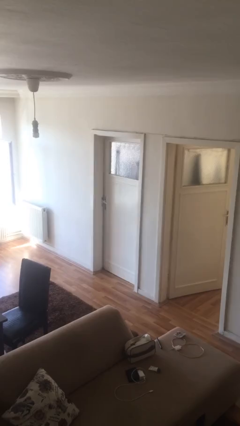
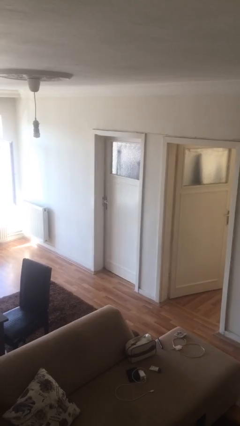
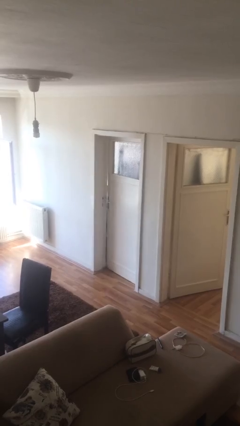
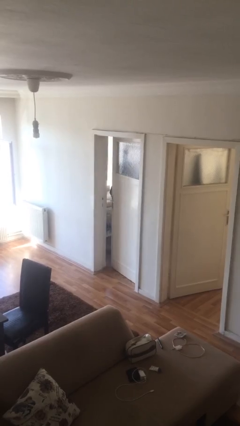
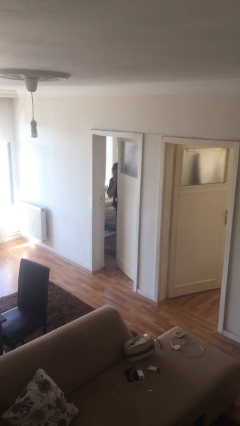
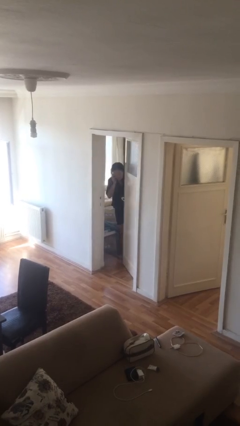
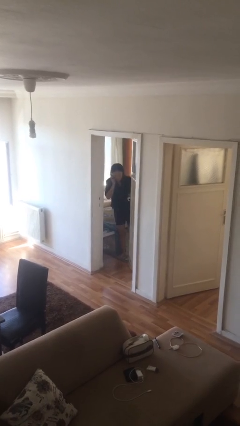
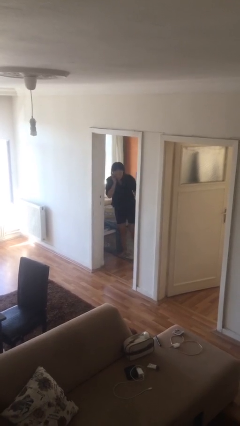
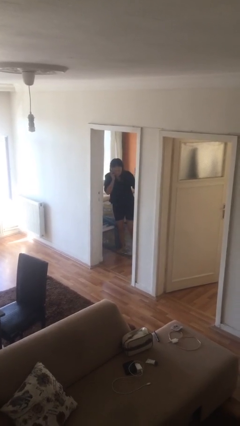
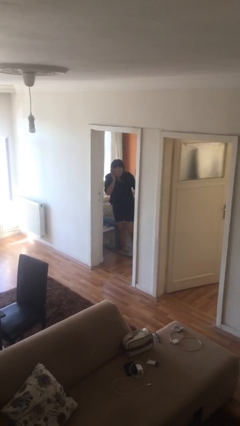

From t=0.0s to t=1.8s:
person opens facility door

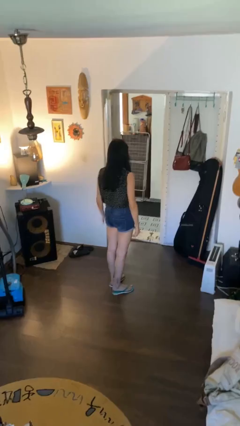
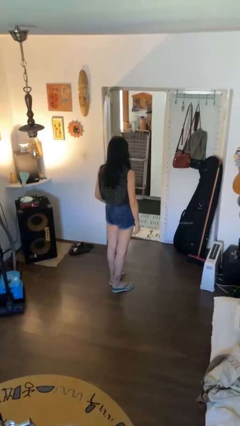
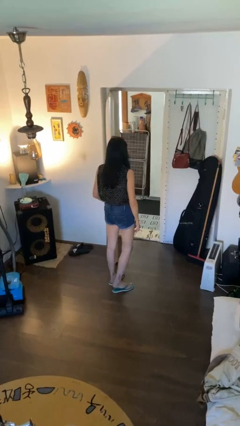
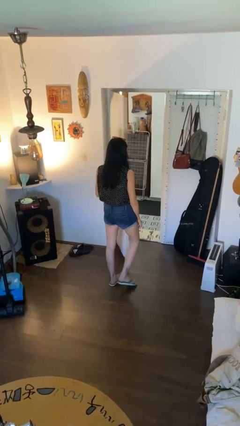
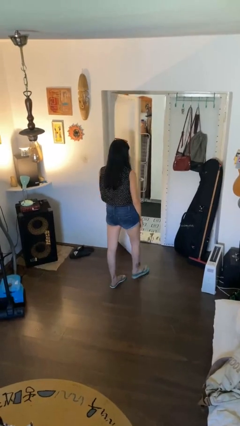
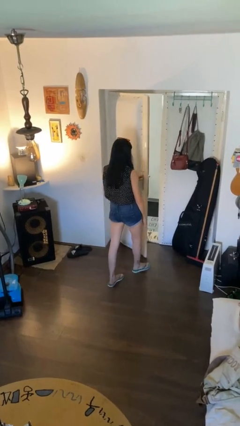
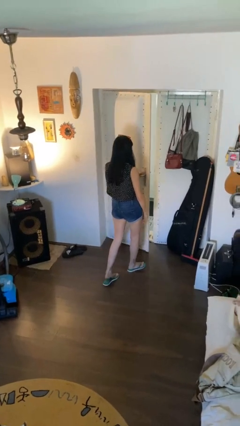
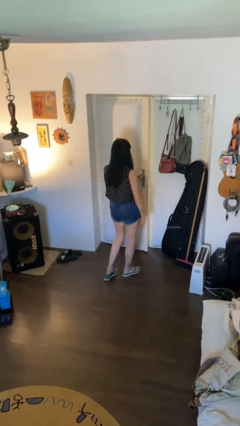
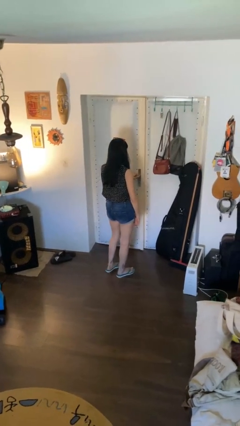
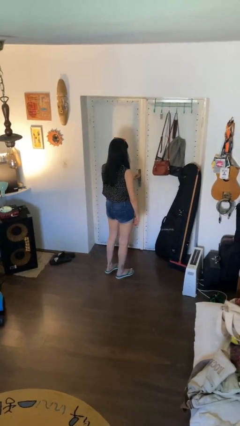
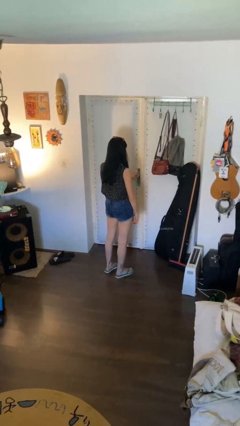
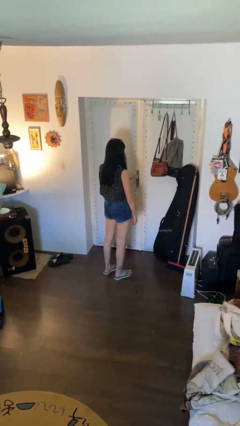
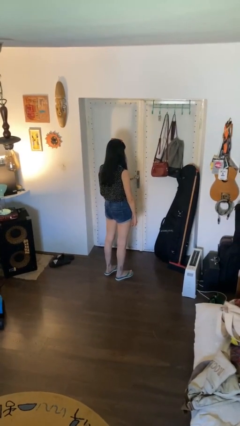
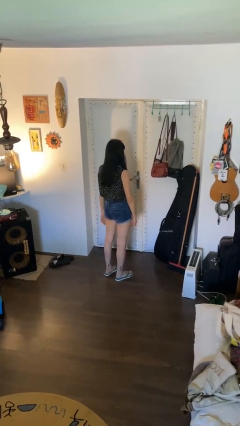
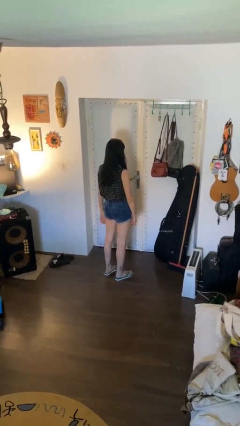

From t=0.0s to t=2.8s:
person closes facility door
